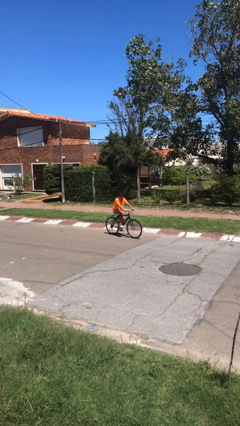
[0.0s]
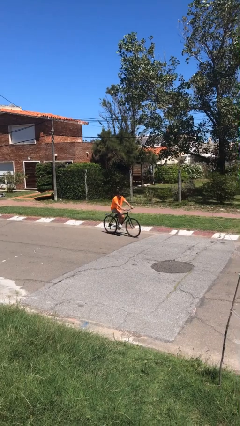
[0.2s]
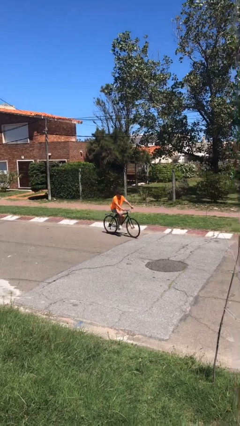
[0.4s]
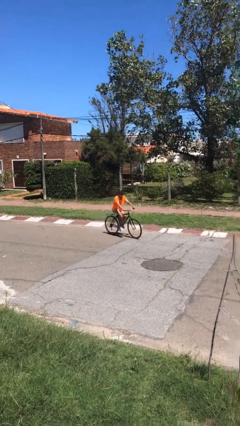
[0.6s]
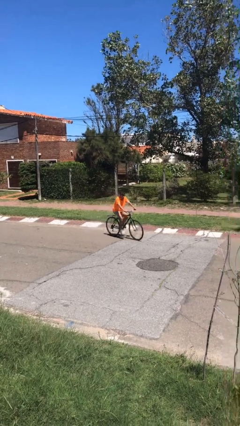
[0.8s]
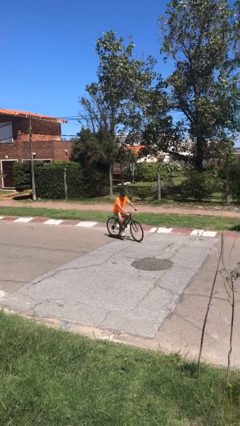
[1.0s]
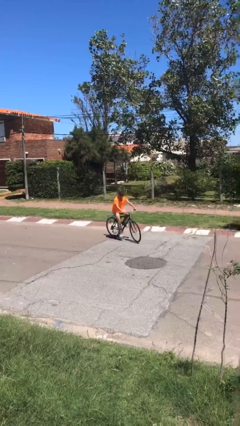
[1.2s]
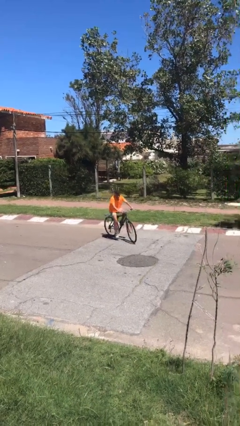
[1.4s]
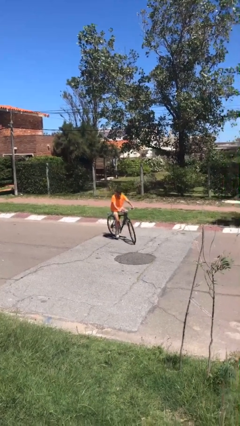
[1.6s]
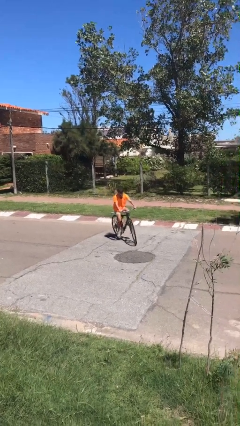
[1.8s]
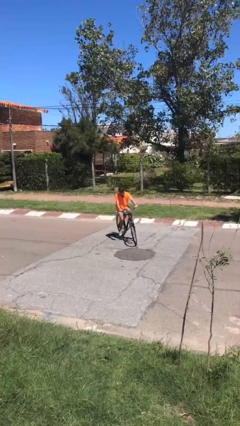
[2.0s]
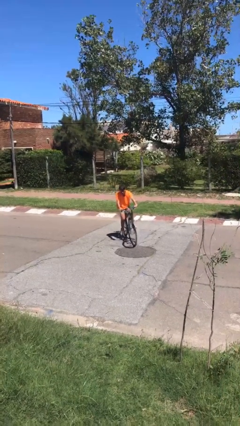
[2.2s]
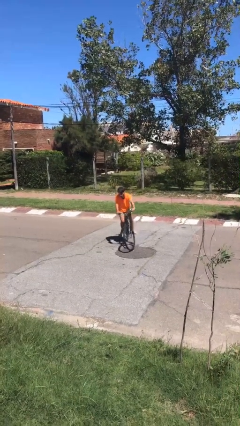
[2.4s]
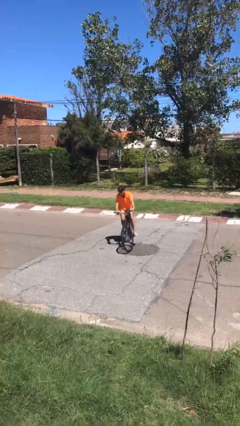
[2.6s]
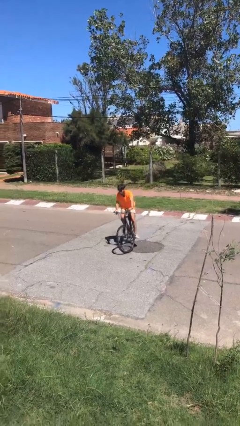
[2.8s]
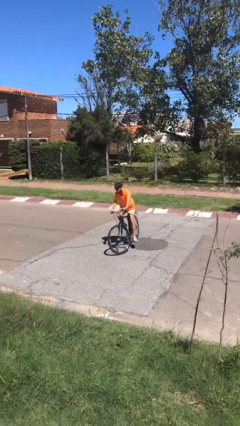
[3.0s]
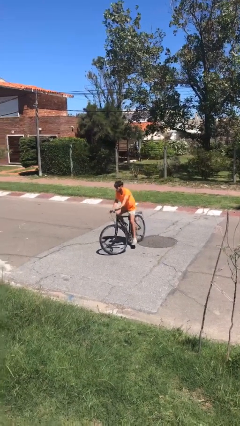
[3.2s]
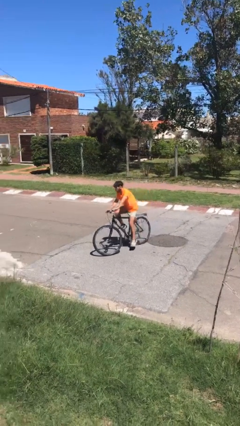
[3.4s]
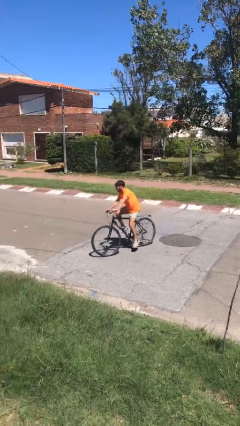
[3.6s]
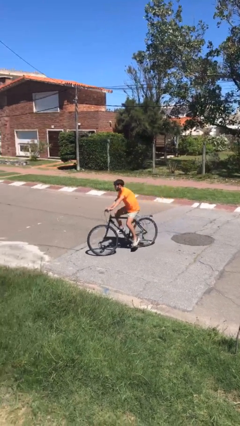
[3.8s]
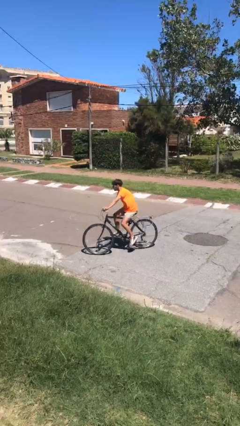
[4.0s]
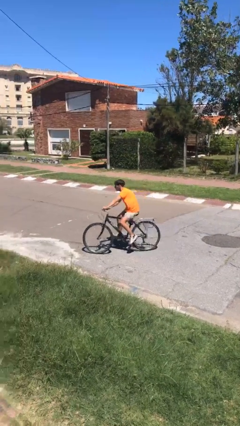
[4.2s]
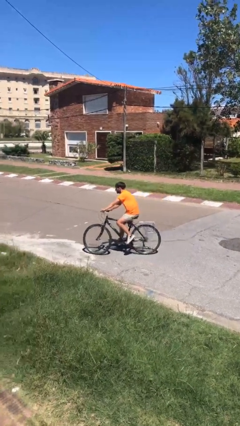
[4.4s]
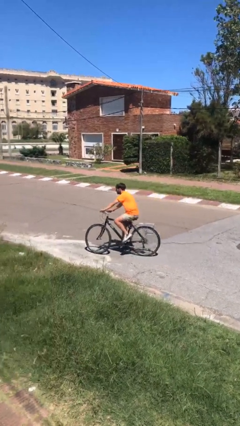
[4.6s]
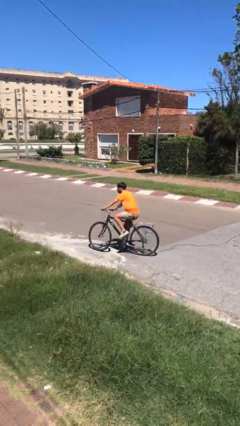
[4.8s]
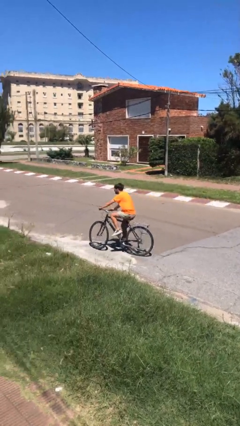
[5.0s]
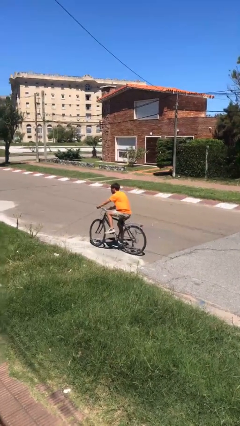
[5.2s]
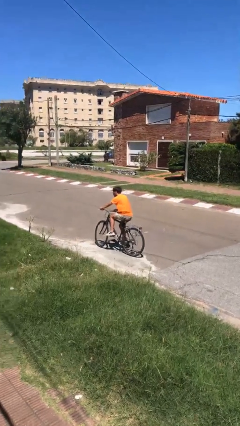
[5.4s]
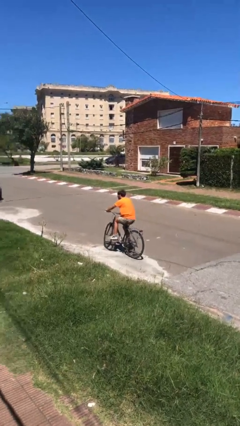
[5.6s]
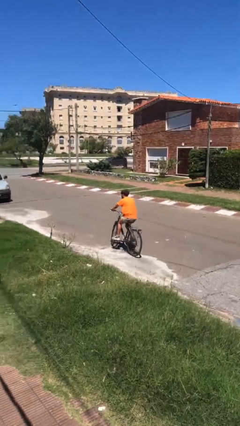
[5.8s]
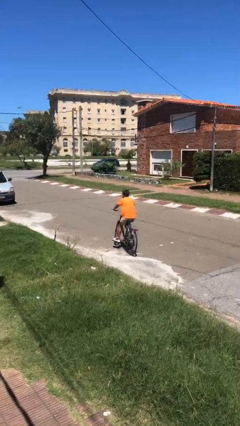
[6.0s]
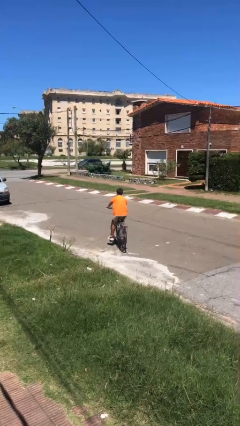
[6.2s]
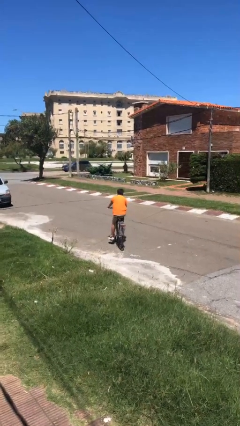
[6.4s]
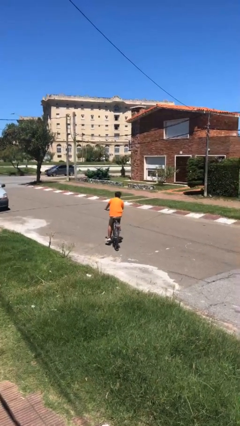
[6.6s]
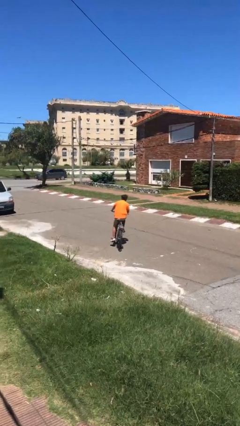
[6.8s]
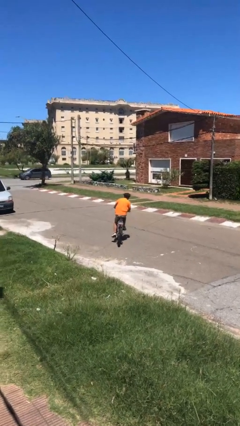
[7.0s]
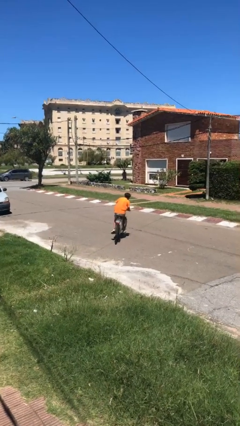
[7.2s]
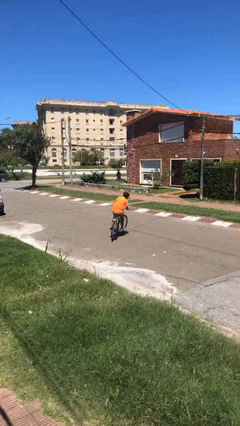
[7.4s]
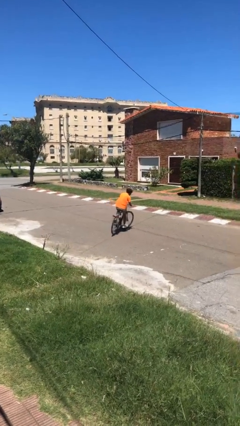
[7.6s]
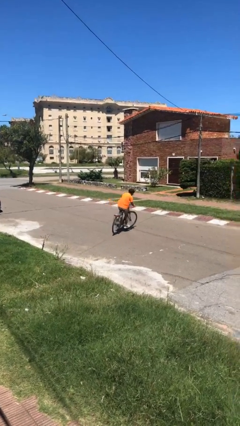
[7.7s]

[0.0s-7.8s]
person rides bicycle

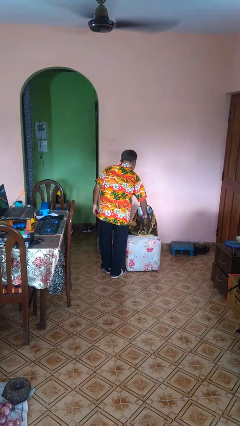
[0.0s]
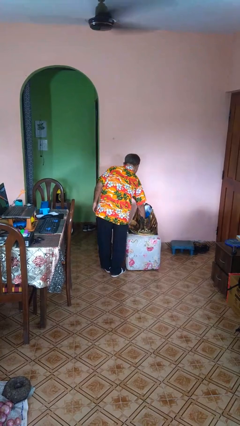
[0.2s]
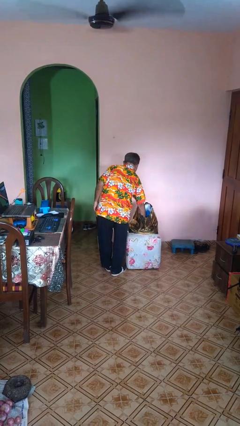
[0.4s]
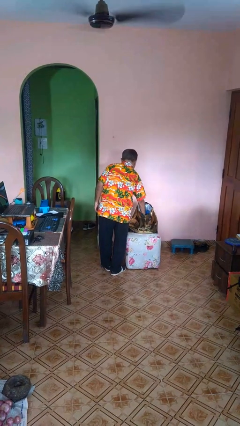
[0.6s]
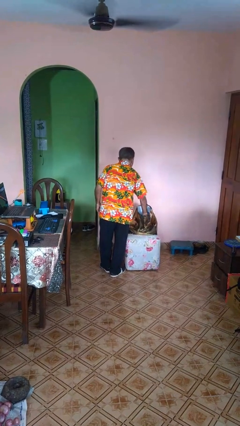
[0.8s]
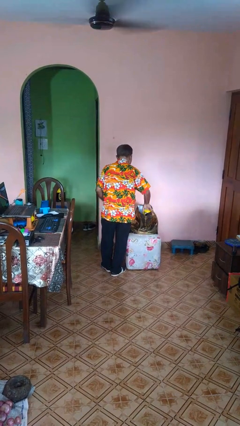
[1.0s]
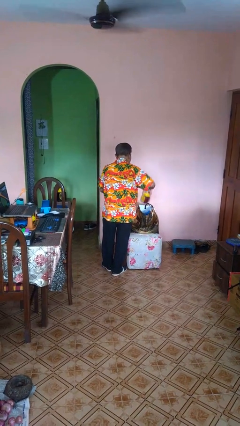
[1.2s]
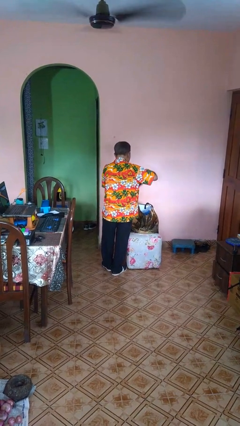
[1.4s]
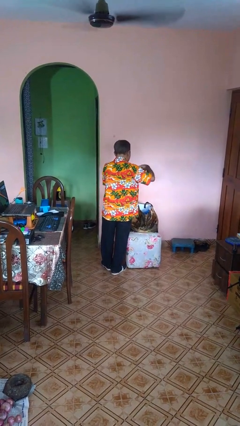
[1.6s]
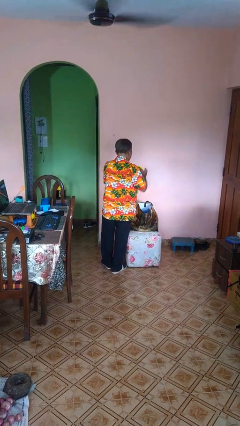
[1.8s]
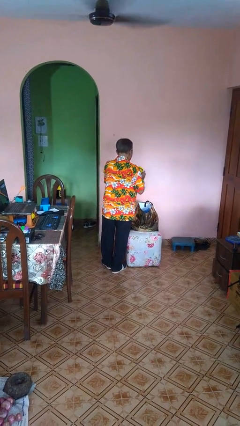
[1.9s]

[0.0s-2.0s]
person takes object from bag

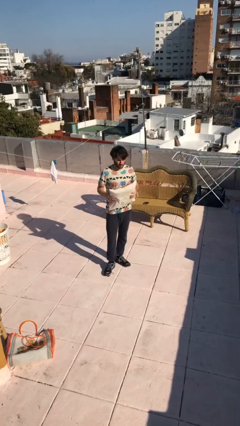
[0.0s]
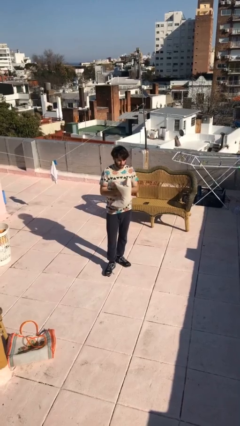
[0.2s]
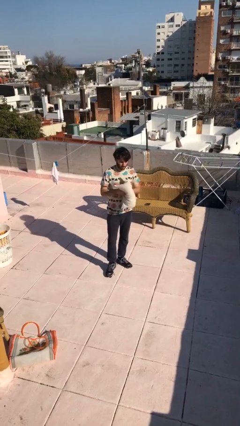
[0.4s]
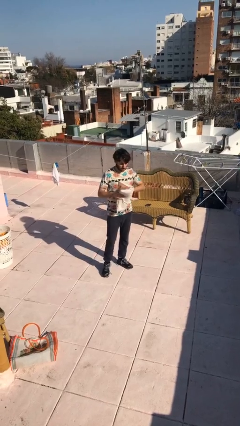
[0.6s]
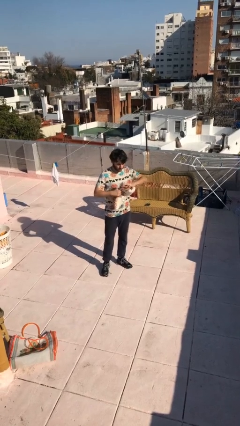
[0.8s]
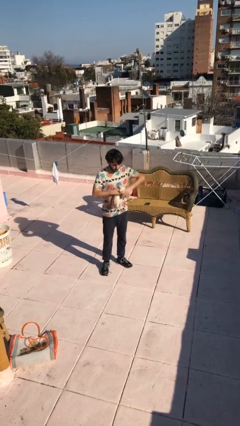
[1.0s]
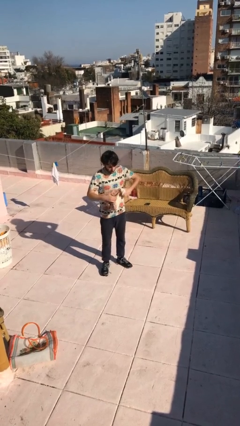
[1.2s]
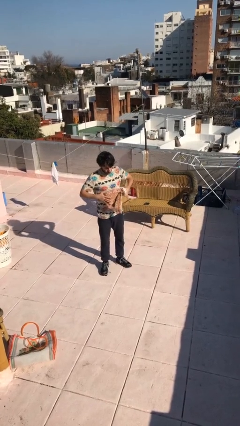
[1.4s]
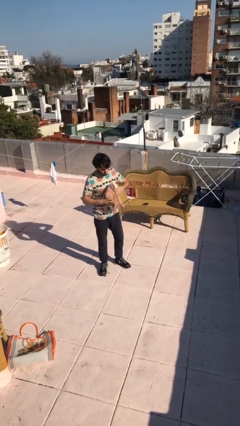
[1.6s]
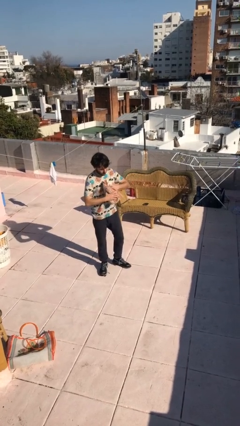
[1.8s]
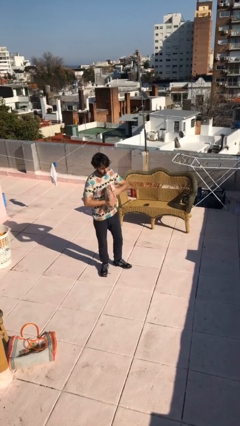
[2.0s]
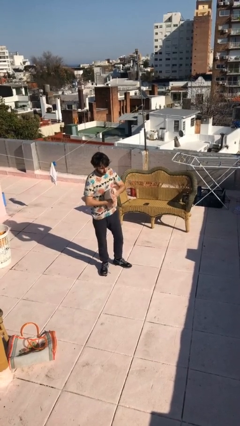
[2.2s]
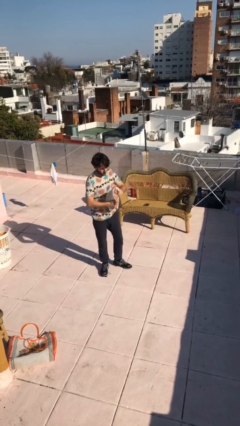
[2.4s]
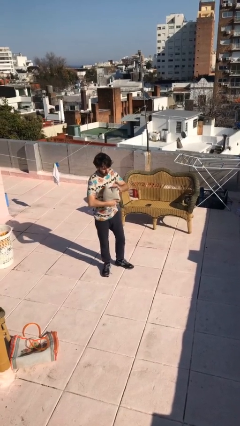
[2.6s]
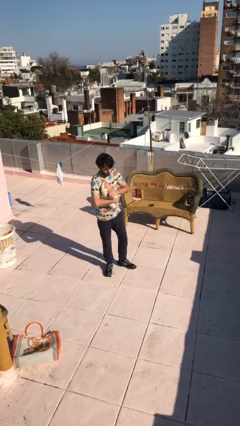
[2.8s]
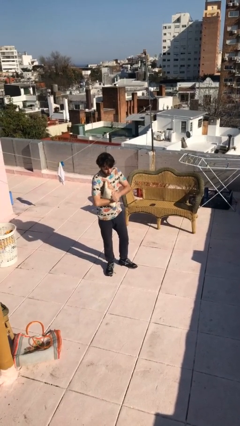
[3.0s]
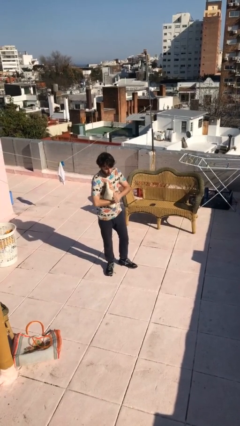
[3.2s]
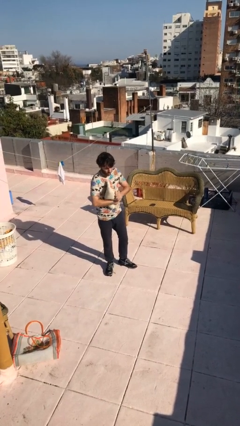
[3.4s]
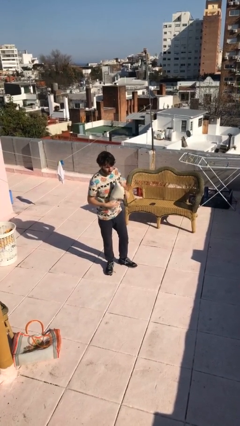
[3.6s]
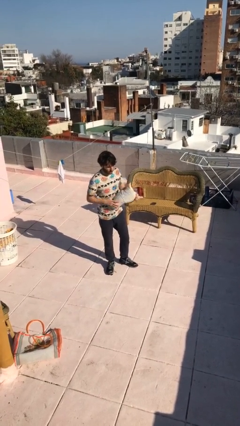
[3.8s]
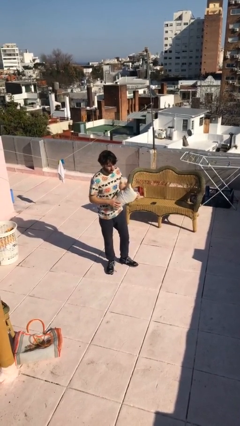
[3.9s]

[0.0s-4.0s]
person squeezes object

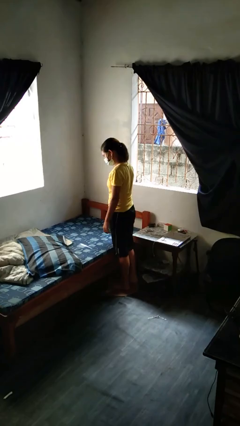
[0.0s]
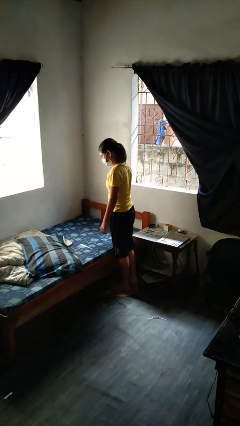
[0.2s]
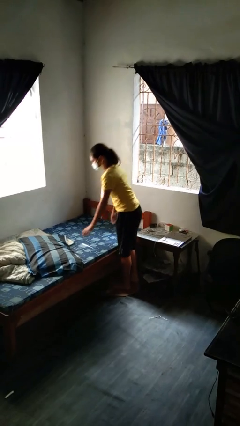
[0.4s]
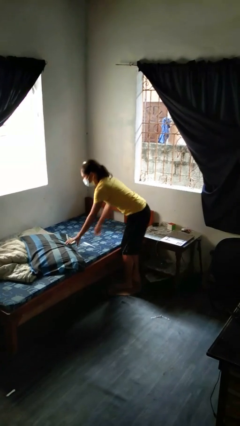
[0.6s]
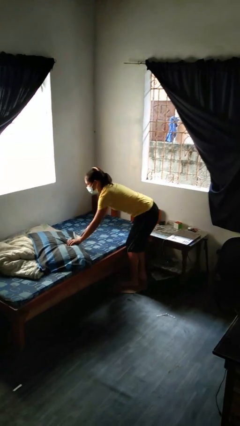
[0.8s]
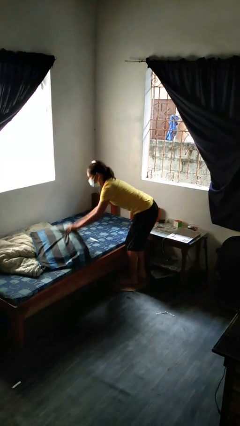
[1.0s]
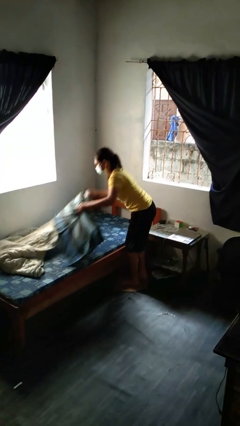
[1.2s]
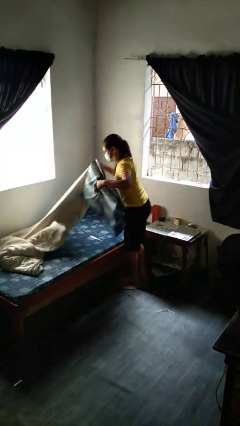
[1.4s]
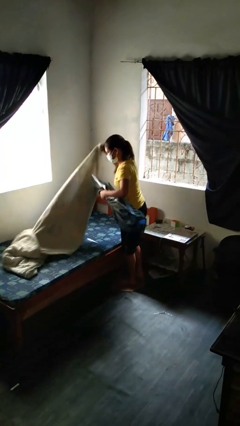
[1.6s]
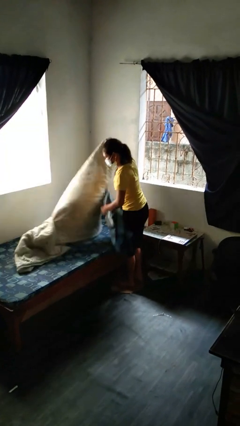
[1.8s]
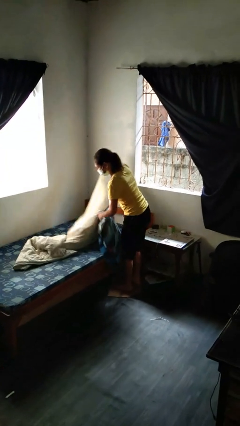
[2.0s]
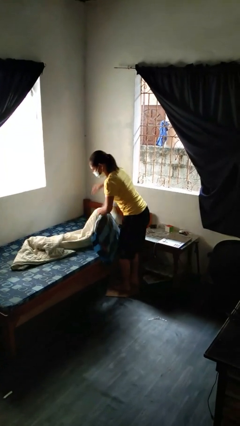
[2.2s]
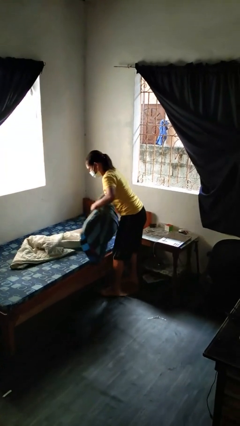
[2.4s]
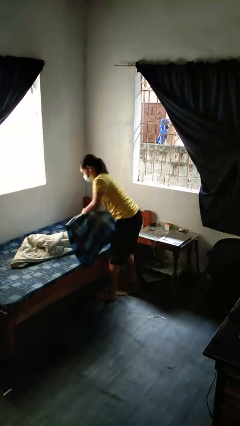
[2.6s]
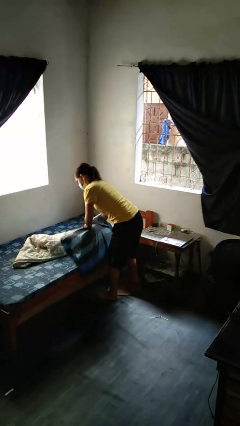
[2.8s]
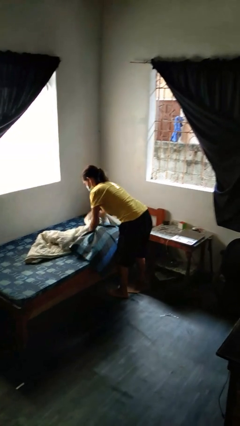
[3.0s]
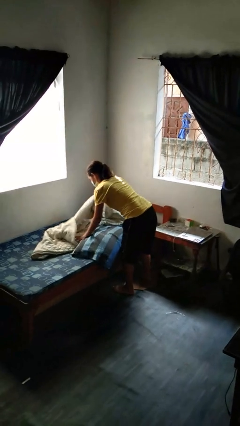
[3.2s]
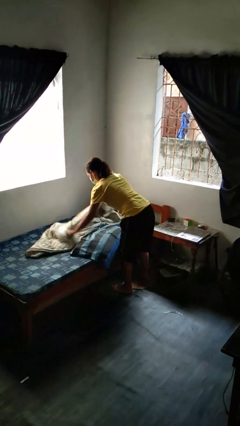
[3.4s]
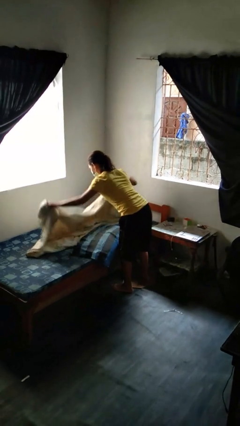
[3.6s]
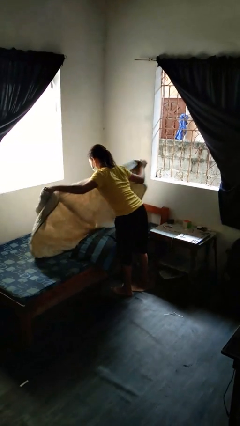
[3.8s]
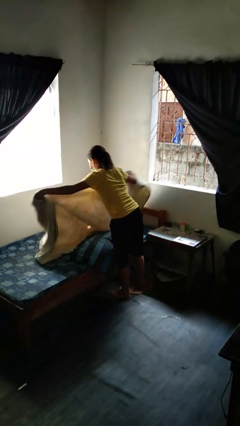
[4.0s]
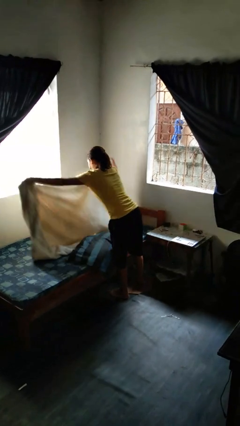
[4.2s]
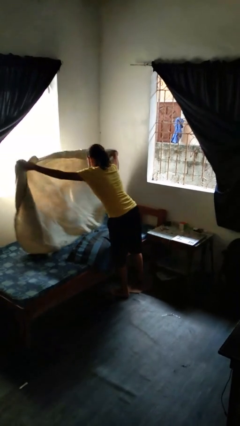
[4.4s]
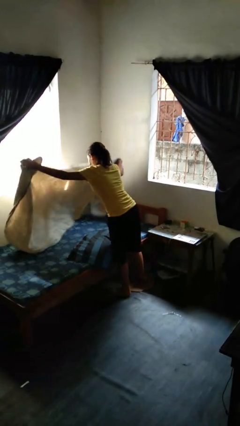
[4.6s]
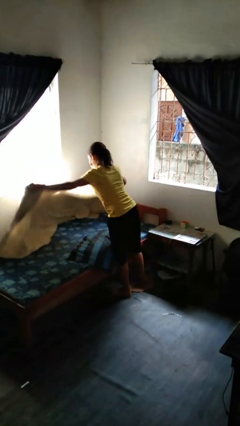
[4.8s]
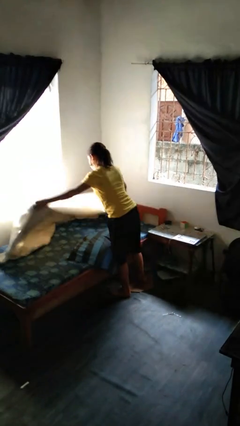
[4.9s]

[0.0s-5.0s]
person makes bed
